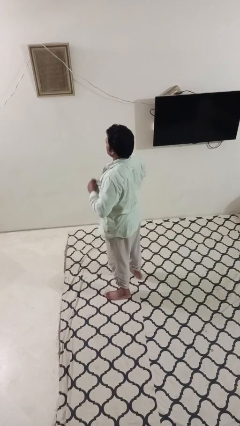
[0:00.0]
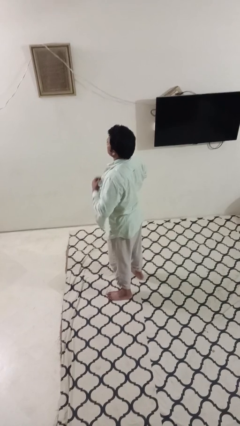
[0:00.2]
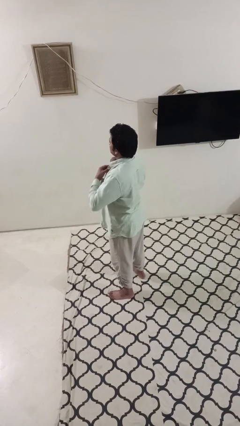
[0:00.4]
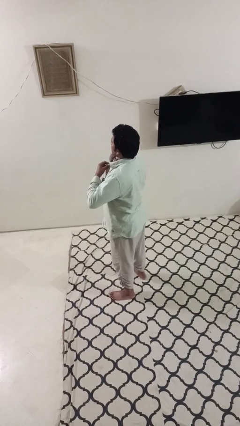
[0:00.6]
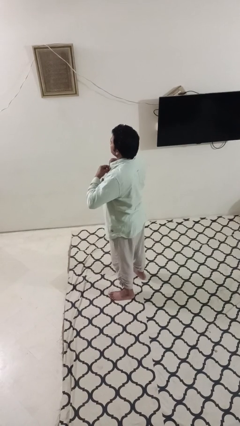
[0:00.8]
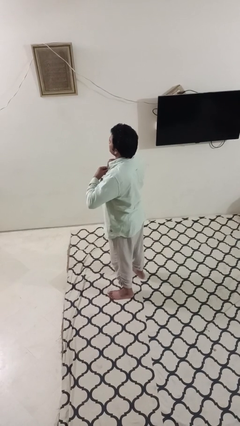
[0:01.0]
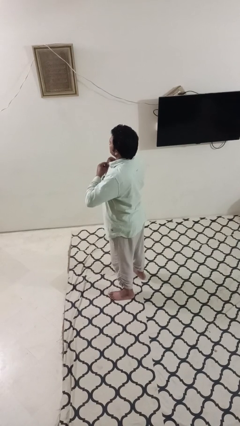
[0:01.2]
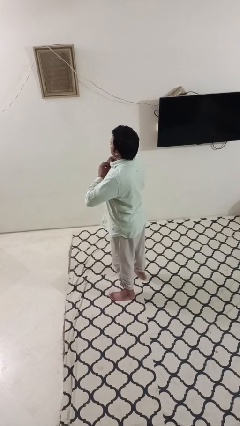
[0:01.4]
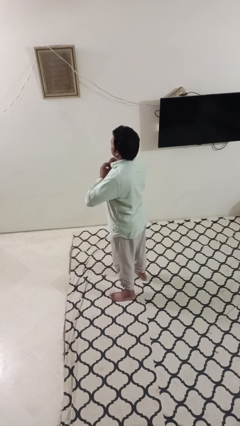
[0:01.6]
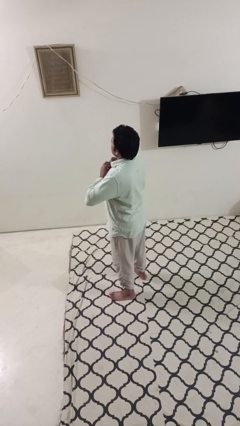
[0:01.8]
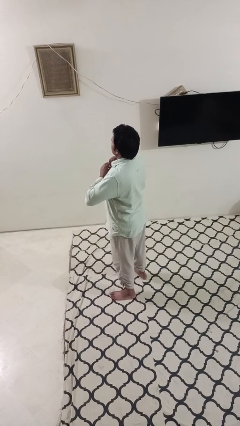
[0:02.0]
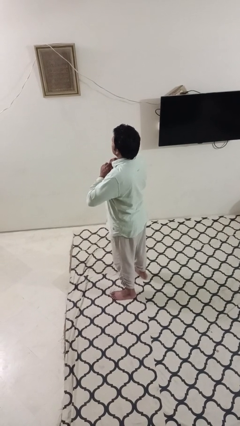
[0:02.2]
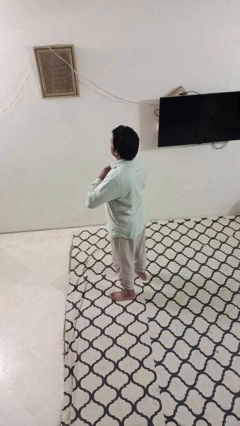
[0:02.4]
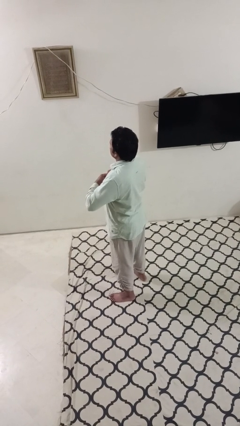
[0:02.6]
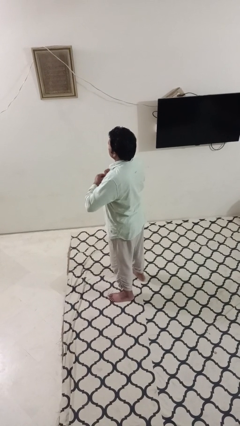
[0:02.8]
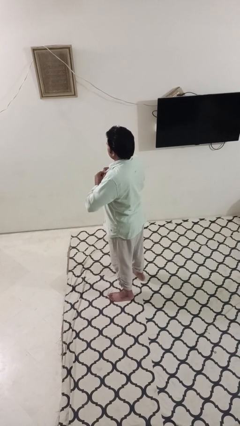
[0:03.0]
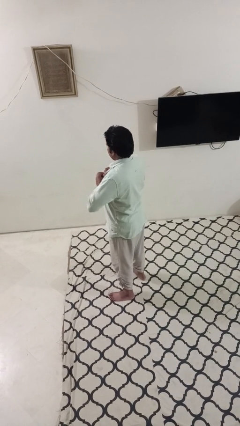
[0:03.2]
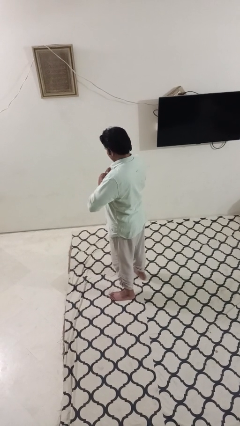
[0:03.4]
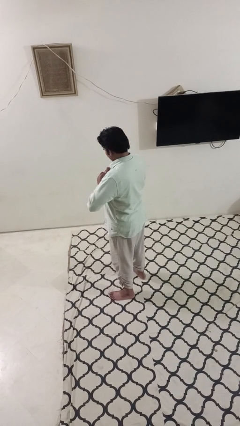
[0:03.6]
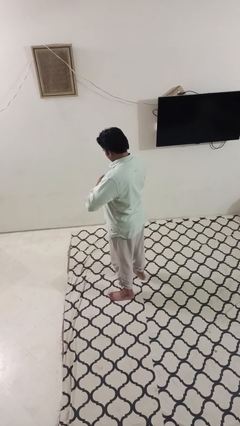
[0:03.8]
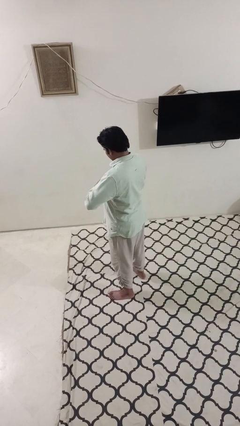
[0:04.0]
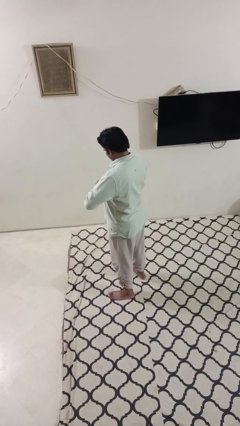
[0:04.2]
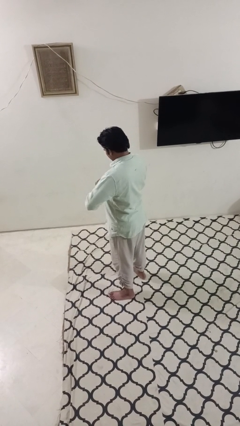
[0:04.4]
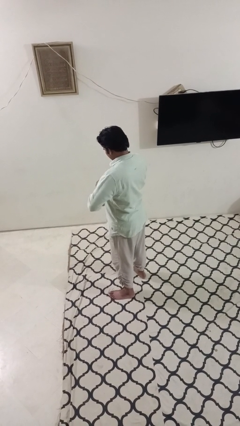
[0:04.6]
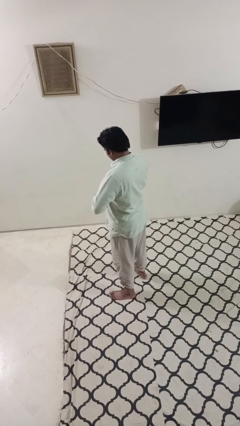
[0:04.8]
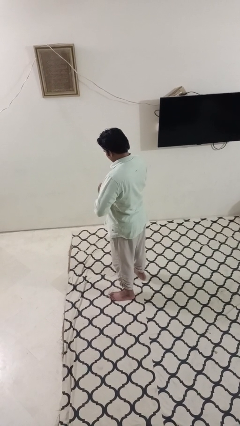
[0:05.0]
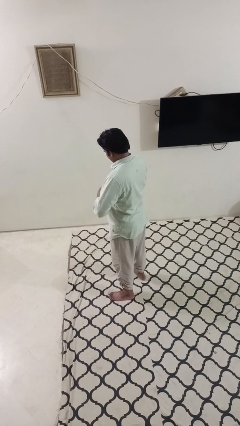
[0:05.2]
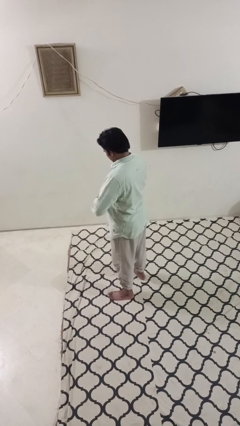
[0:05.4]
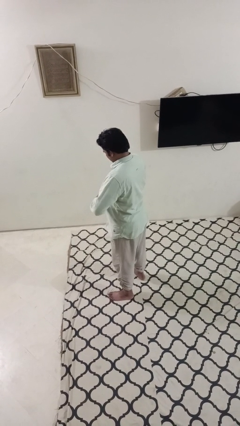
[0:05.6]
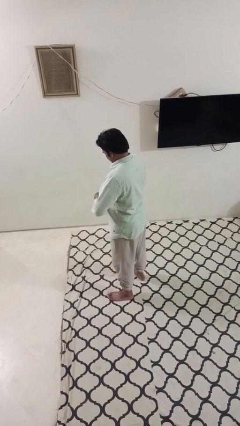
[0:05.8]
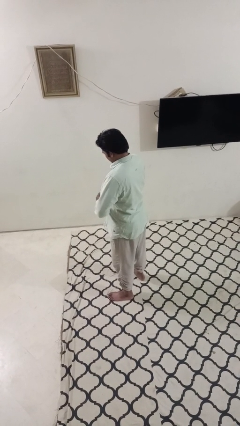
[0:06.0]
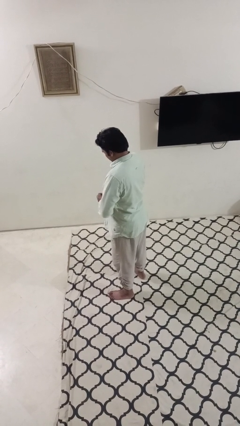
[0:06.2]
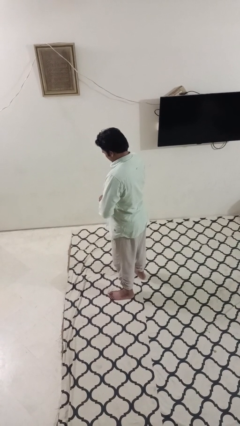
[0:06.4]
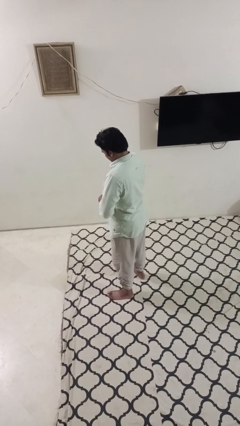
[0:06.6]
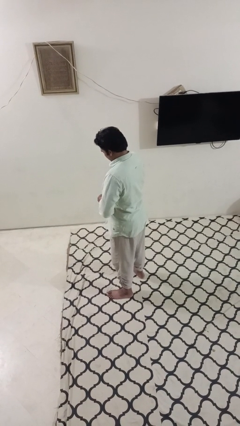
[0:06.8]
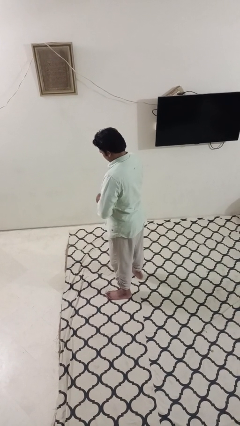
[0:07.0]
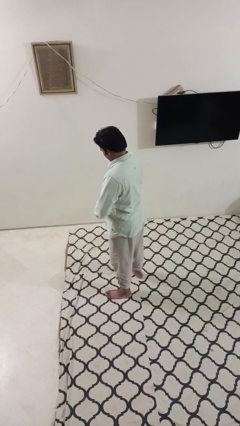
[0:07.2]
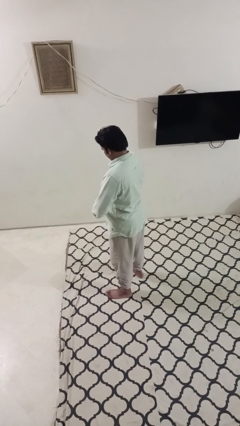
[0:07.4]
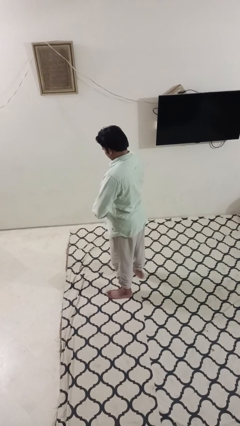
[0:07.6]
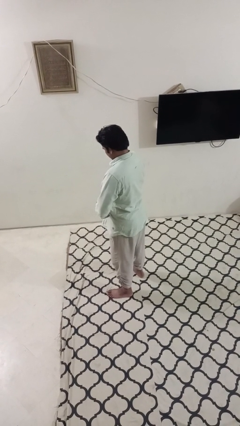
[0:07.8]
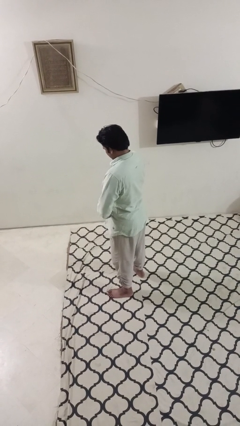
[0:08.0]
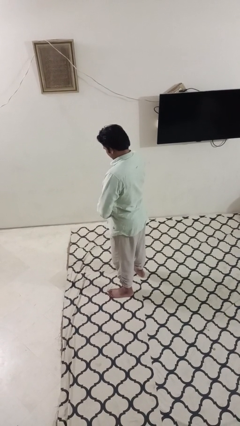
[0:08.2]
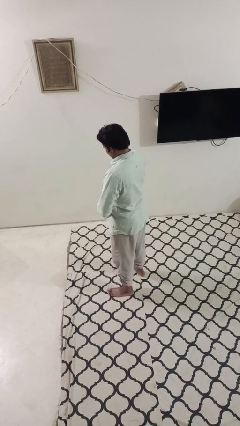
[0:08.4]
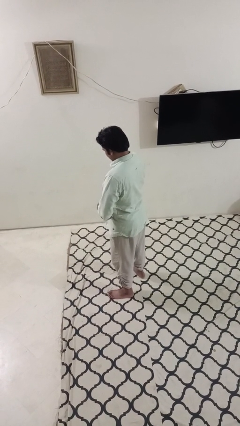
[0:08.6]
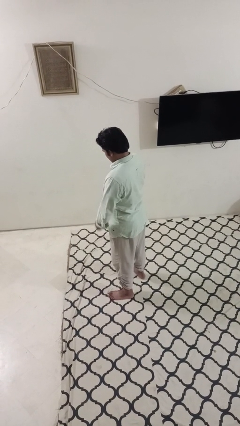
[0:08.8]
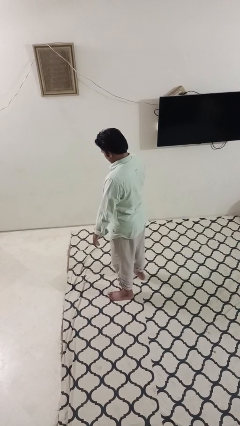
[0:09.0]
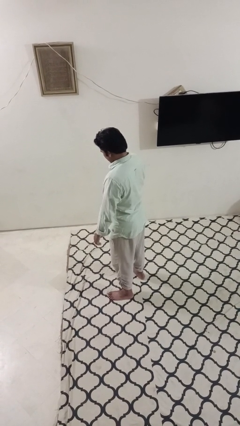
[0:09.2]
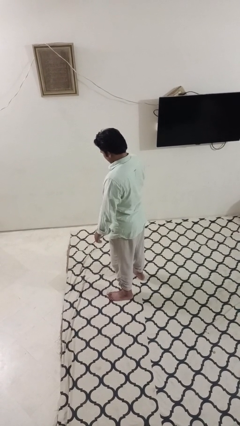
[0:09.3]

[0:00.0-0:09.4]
person buttons shirt

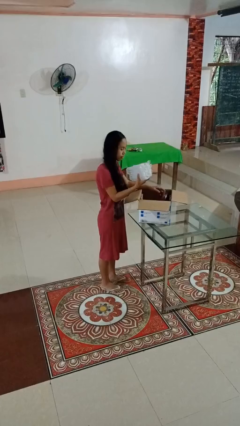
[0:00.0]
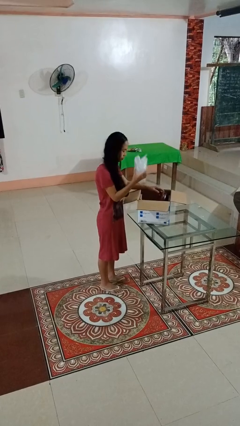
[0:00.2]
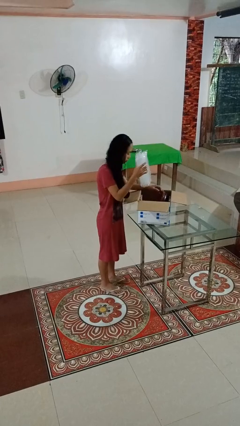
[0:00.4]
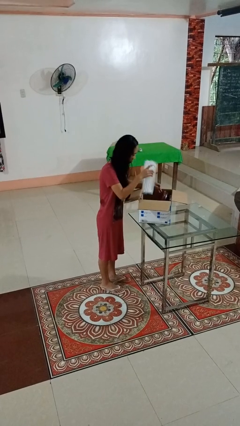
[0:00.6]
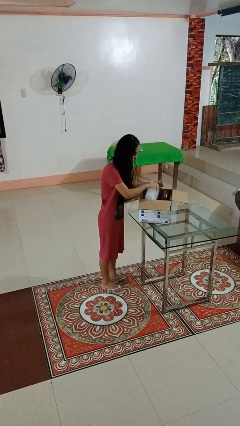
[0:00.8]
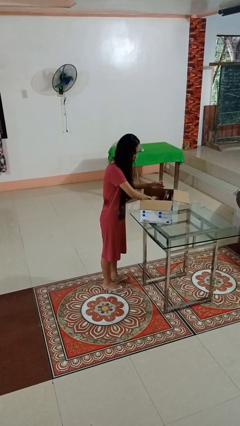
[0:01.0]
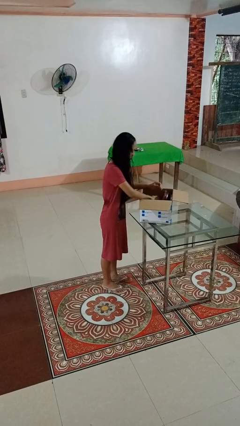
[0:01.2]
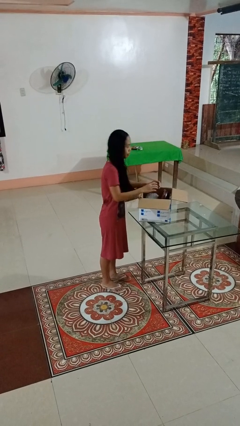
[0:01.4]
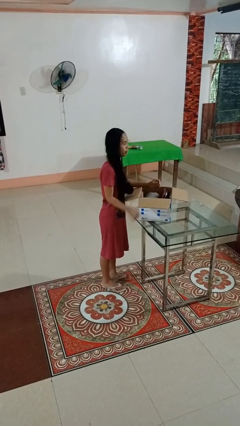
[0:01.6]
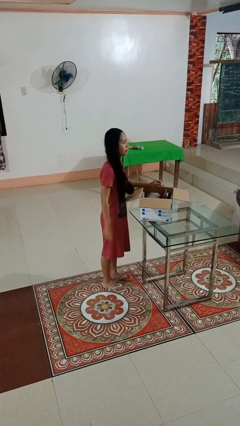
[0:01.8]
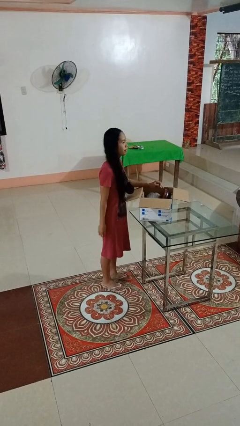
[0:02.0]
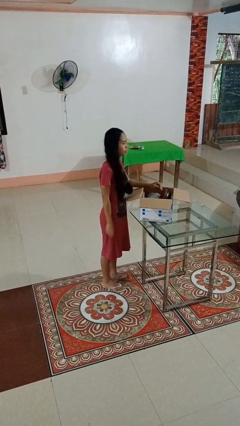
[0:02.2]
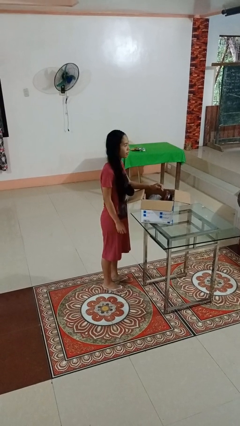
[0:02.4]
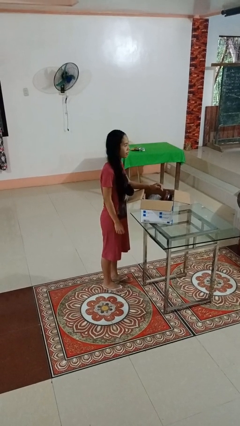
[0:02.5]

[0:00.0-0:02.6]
person puts object into box

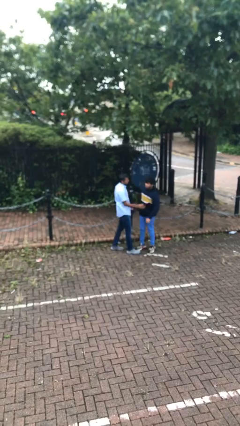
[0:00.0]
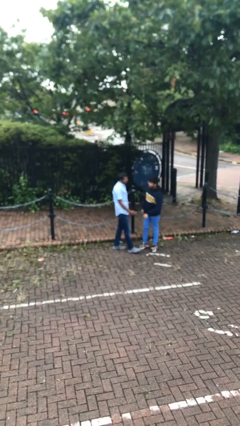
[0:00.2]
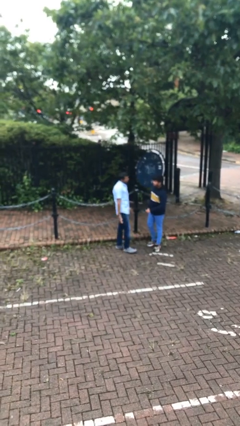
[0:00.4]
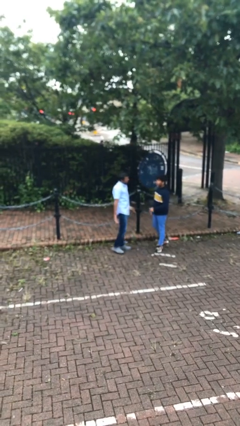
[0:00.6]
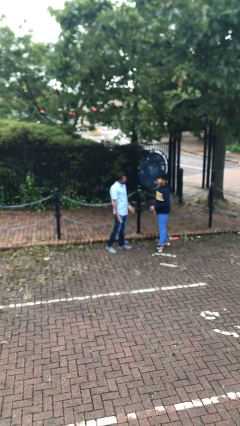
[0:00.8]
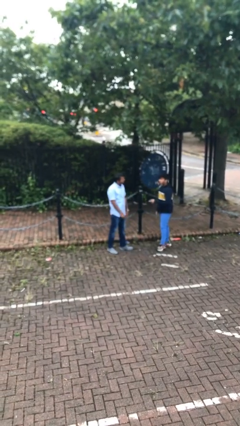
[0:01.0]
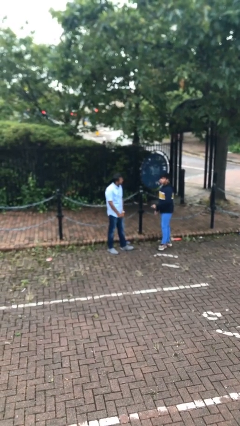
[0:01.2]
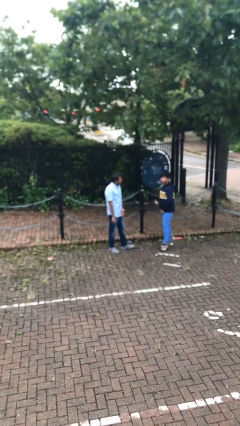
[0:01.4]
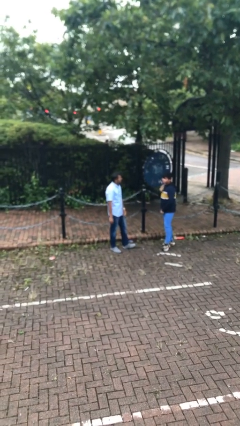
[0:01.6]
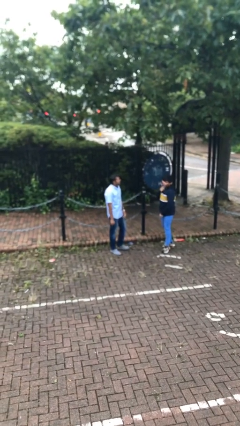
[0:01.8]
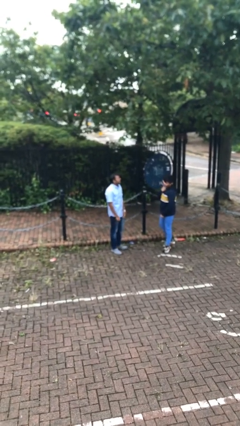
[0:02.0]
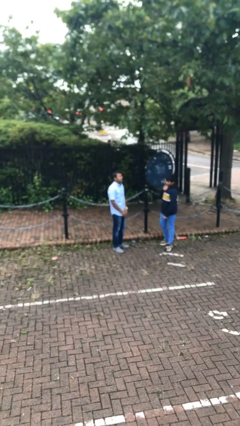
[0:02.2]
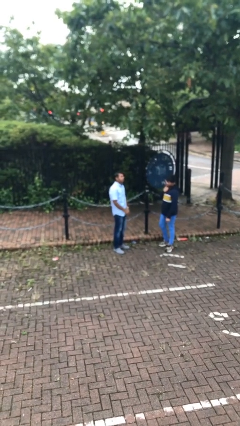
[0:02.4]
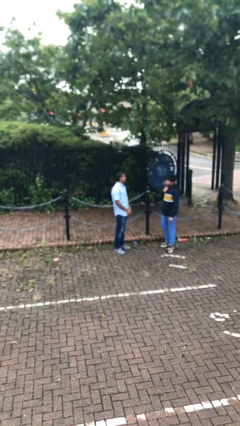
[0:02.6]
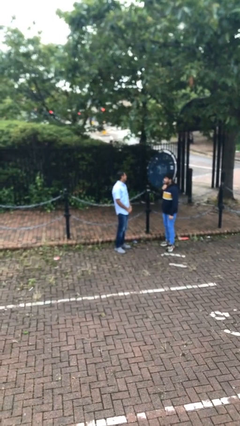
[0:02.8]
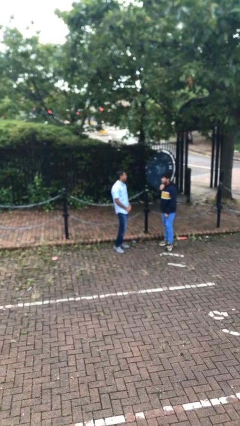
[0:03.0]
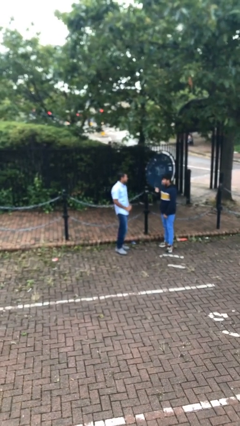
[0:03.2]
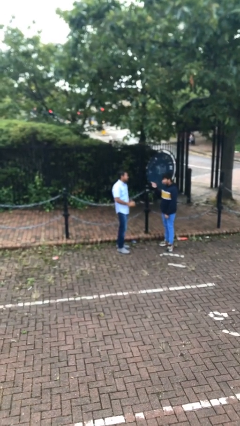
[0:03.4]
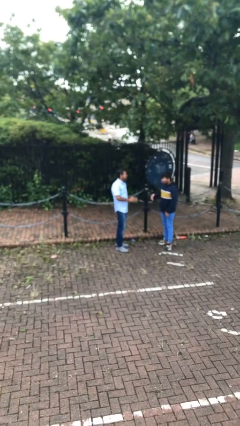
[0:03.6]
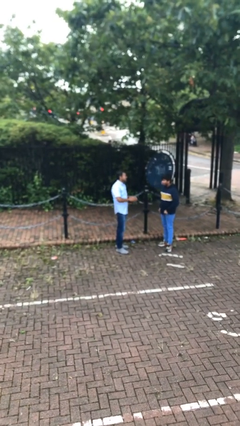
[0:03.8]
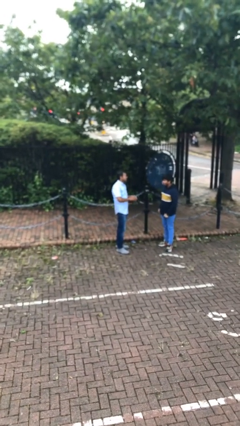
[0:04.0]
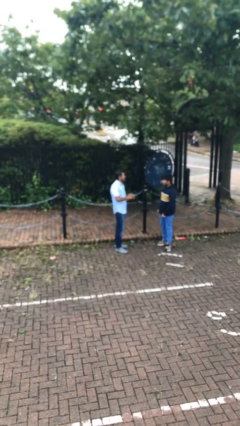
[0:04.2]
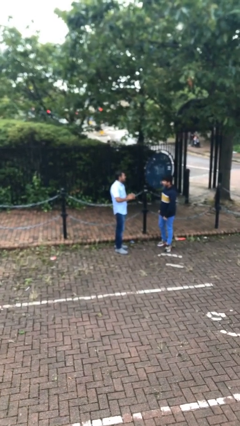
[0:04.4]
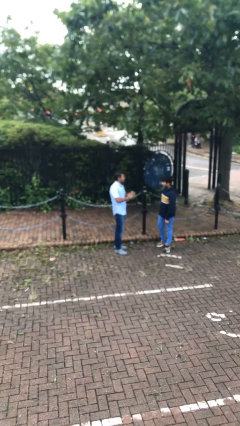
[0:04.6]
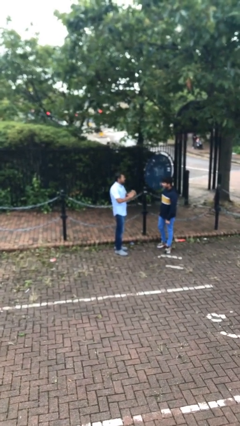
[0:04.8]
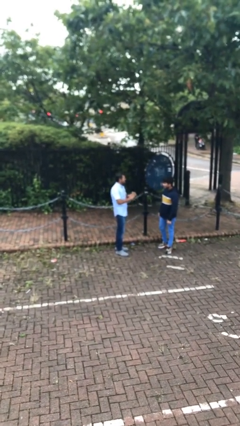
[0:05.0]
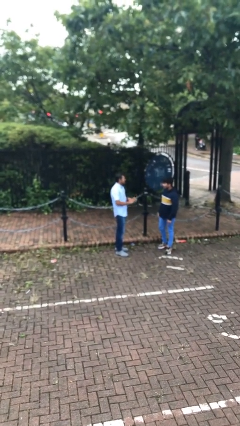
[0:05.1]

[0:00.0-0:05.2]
person talks to person

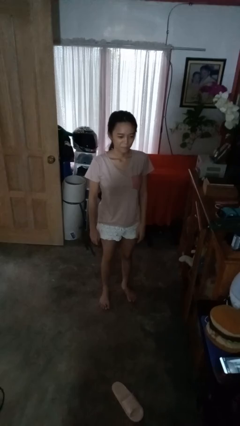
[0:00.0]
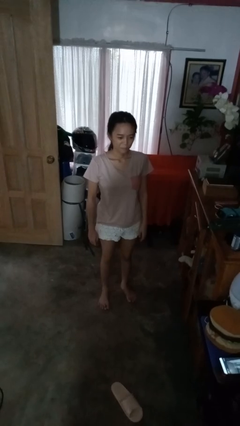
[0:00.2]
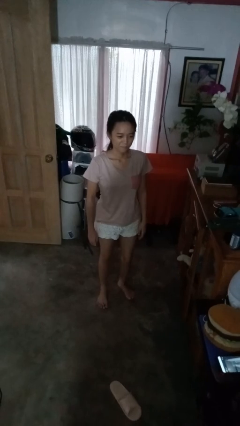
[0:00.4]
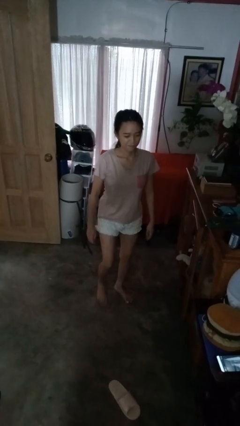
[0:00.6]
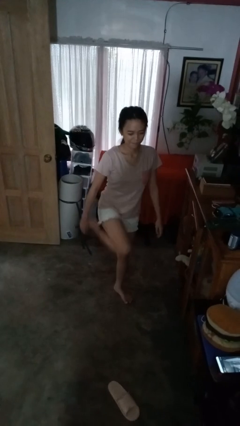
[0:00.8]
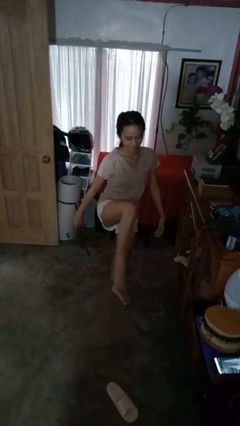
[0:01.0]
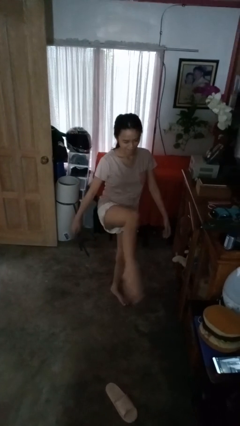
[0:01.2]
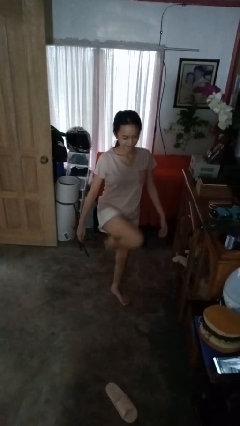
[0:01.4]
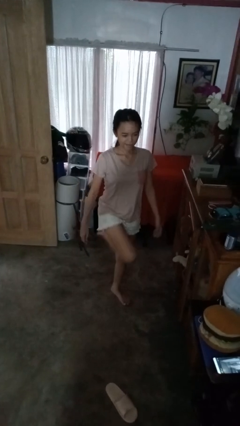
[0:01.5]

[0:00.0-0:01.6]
person karate kicks
